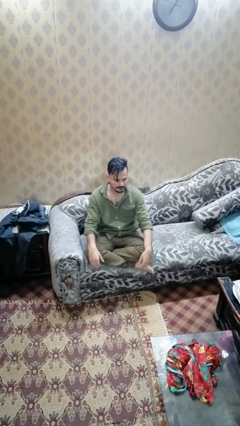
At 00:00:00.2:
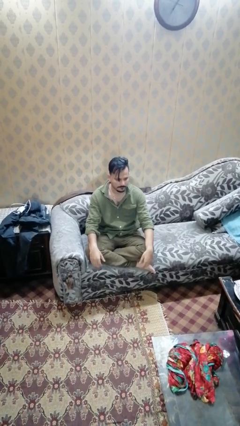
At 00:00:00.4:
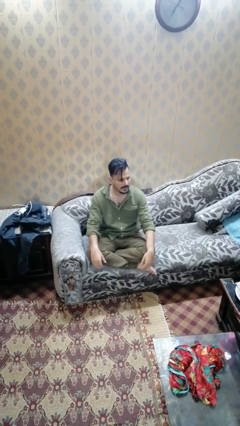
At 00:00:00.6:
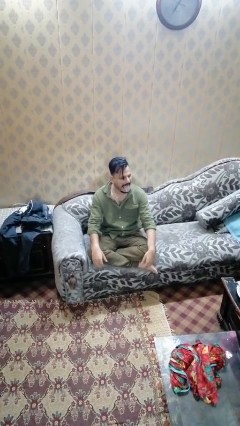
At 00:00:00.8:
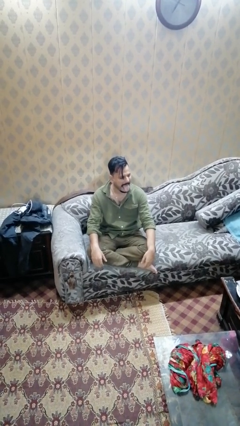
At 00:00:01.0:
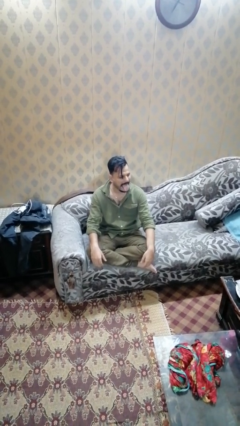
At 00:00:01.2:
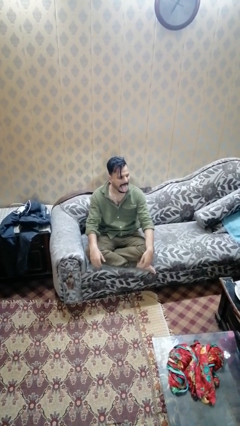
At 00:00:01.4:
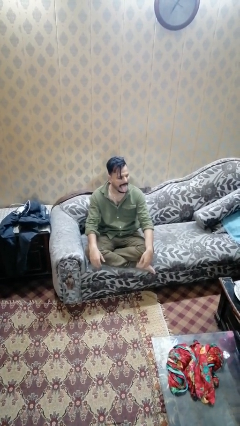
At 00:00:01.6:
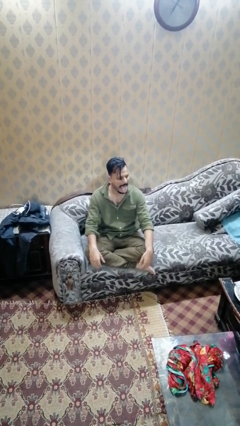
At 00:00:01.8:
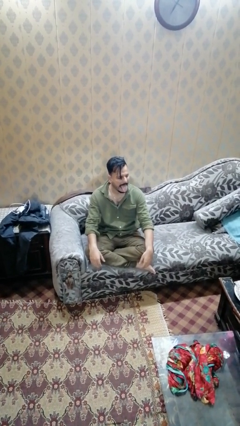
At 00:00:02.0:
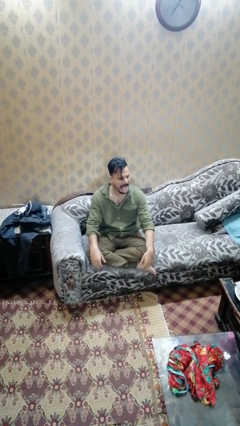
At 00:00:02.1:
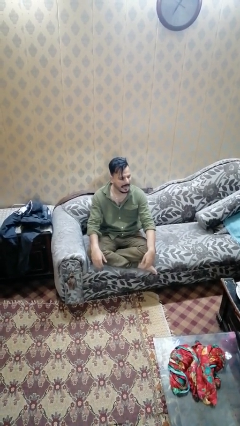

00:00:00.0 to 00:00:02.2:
person sticks out tongue

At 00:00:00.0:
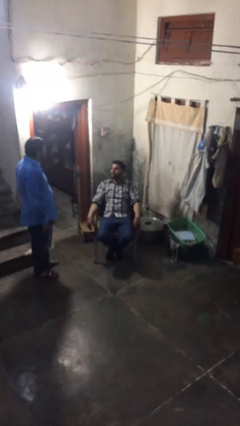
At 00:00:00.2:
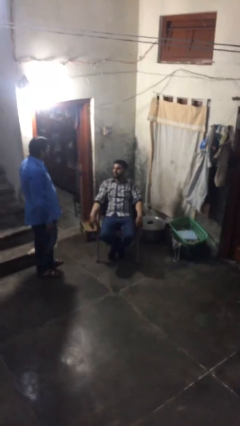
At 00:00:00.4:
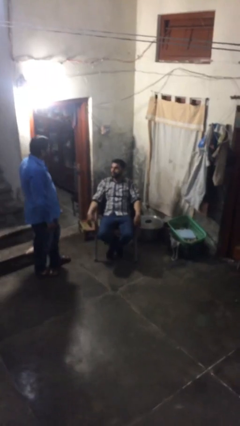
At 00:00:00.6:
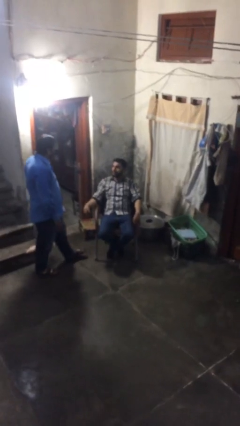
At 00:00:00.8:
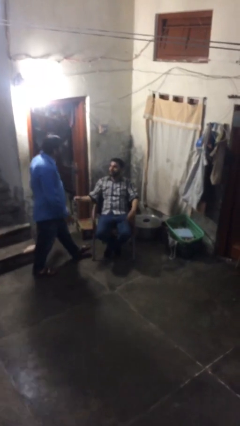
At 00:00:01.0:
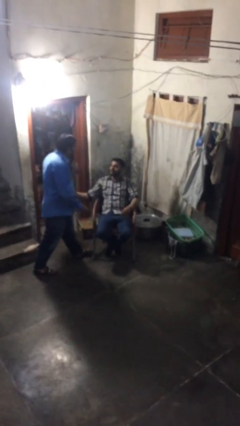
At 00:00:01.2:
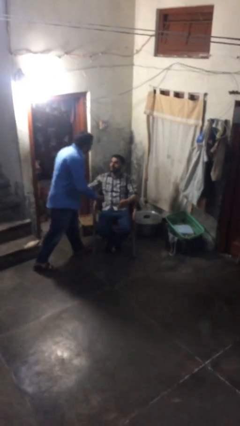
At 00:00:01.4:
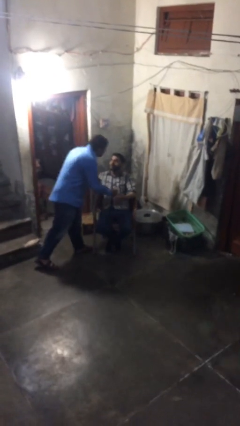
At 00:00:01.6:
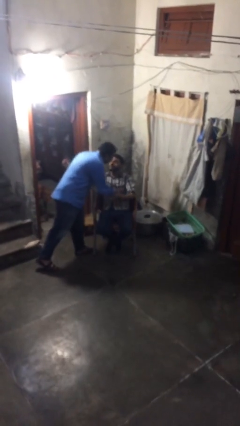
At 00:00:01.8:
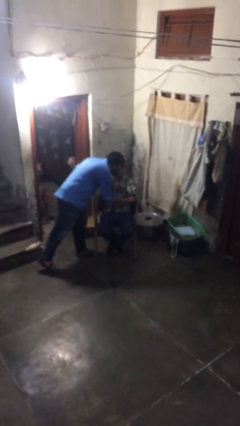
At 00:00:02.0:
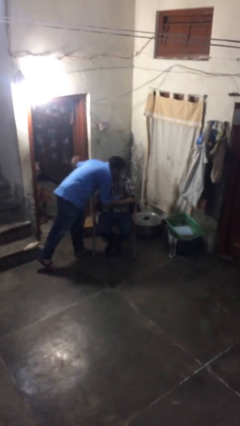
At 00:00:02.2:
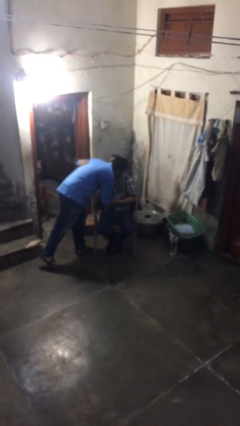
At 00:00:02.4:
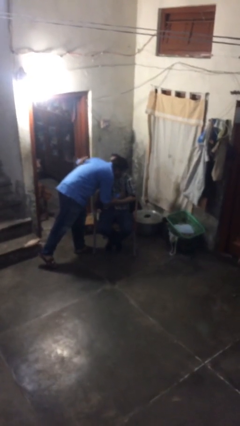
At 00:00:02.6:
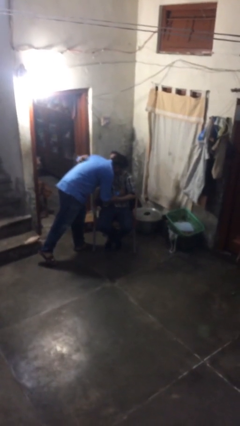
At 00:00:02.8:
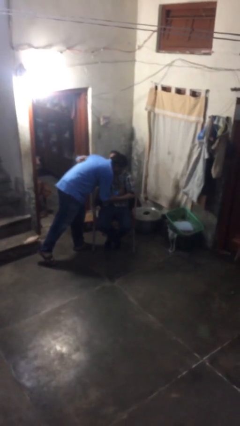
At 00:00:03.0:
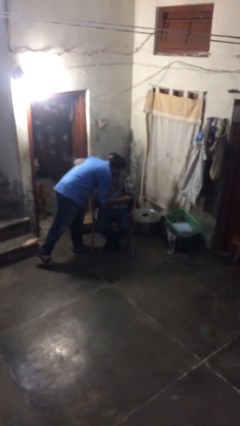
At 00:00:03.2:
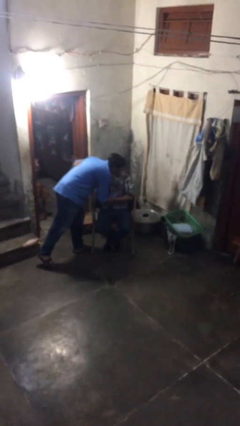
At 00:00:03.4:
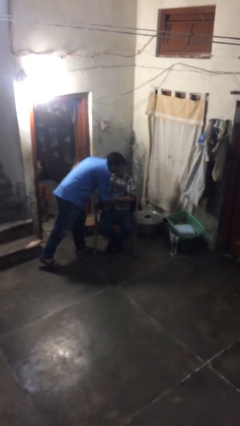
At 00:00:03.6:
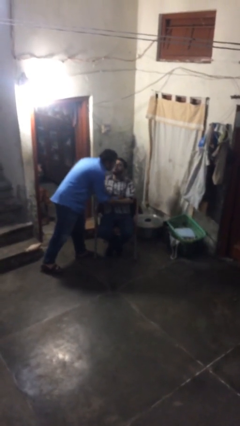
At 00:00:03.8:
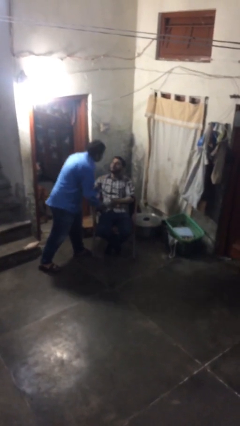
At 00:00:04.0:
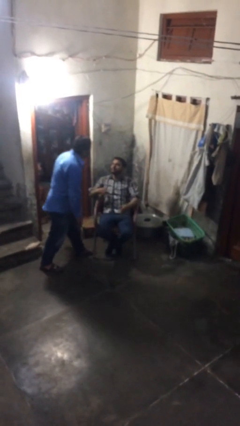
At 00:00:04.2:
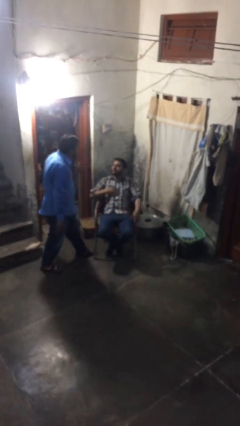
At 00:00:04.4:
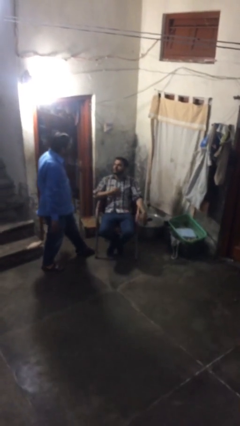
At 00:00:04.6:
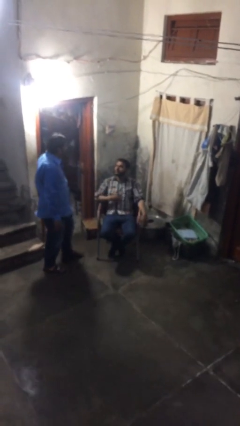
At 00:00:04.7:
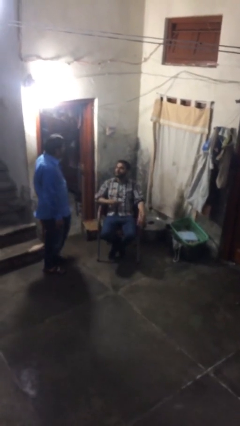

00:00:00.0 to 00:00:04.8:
person embraces person

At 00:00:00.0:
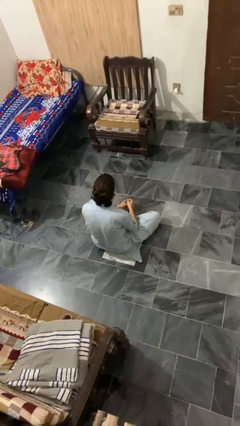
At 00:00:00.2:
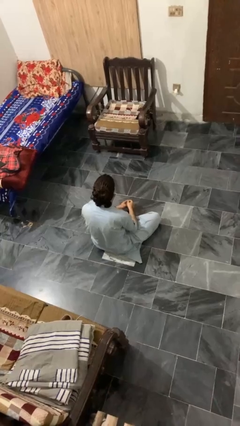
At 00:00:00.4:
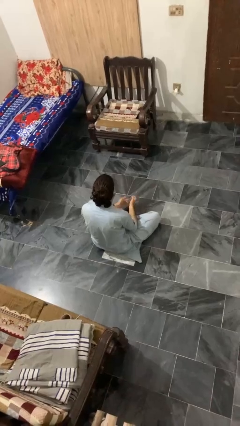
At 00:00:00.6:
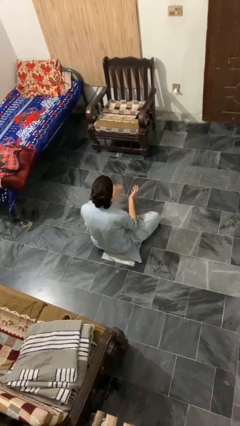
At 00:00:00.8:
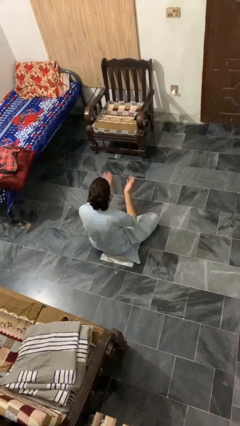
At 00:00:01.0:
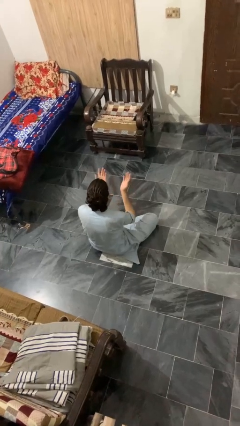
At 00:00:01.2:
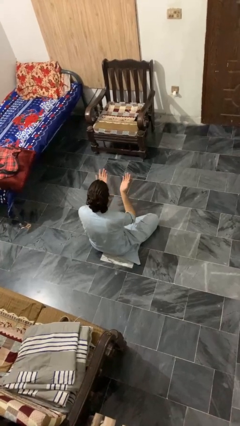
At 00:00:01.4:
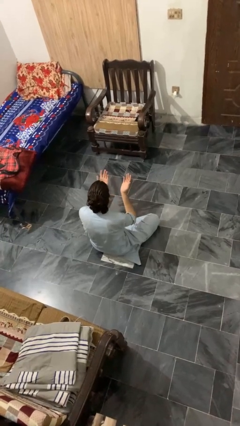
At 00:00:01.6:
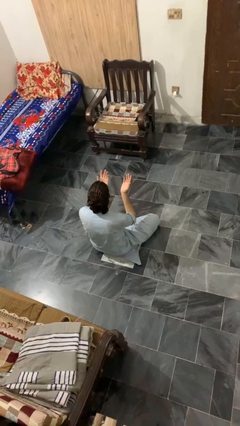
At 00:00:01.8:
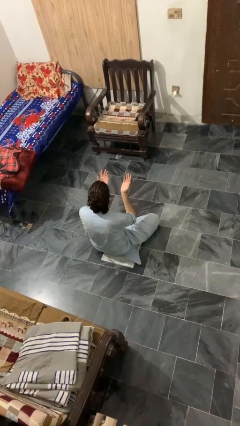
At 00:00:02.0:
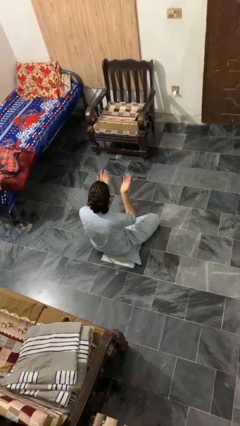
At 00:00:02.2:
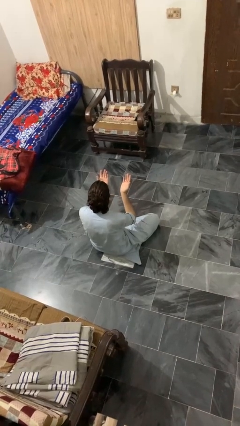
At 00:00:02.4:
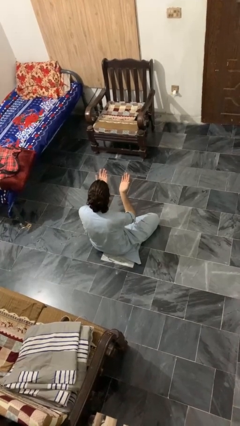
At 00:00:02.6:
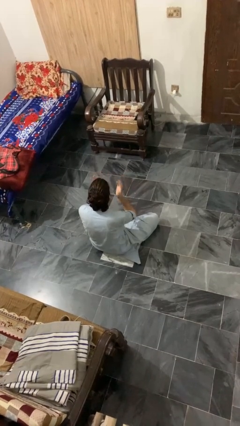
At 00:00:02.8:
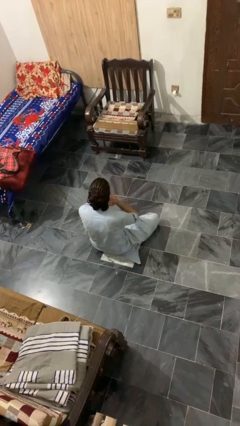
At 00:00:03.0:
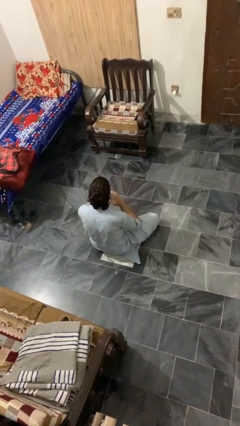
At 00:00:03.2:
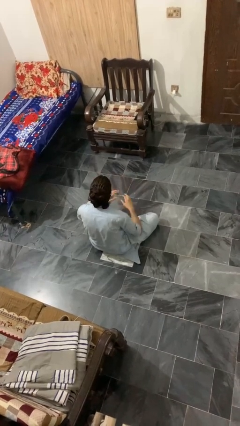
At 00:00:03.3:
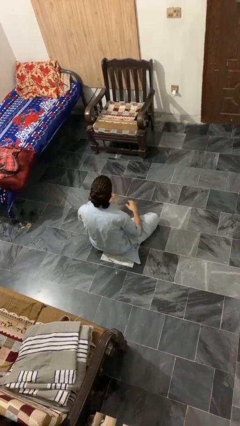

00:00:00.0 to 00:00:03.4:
person prays

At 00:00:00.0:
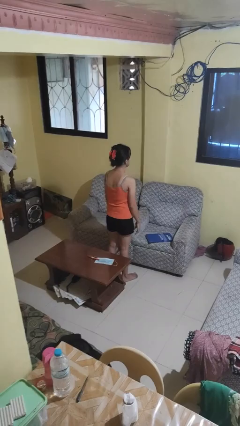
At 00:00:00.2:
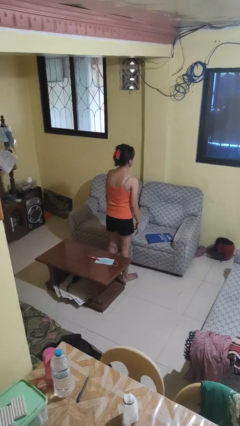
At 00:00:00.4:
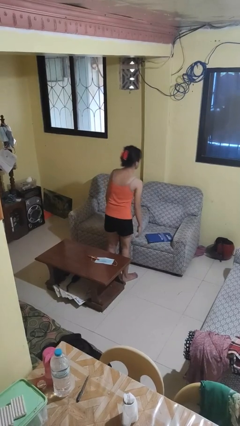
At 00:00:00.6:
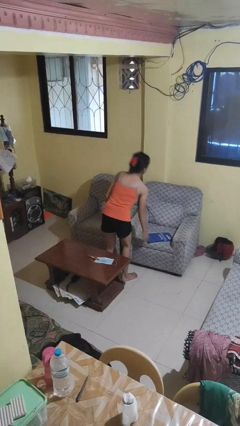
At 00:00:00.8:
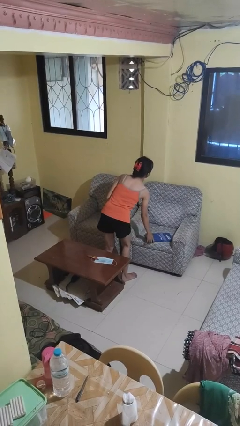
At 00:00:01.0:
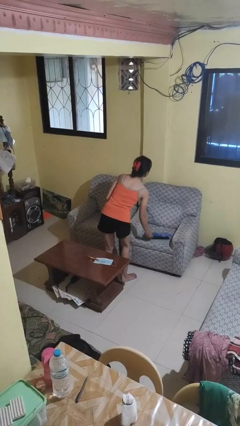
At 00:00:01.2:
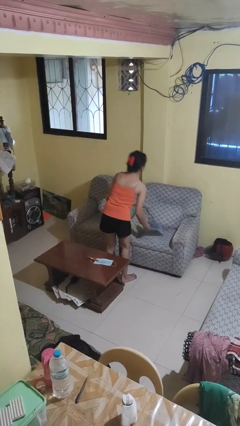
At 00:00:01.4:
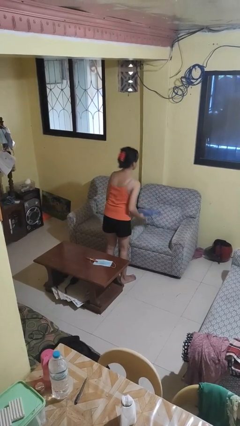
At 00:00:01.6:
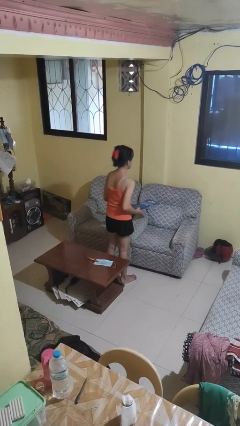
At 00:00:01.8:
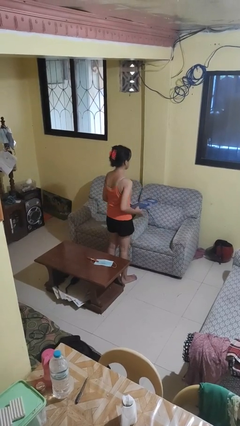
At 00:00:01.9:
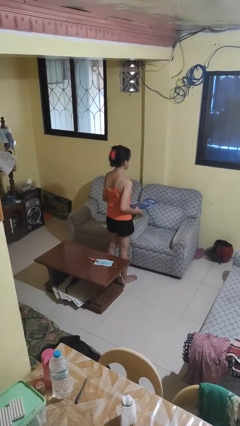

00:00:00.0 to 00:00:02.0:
person picks up object from couch

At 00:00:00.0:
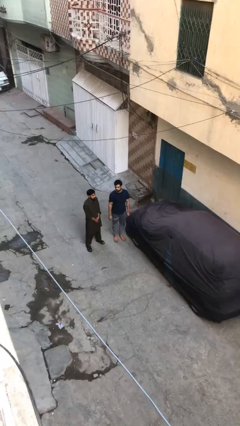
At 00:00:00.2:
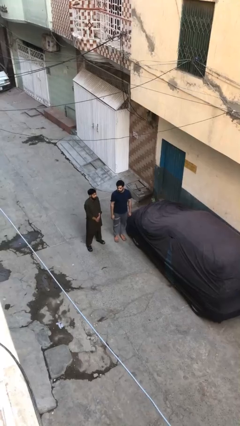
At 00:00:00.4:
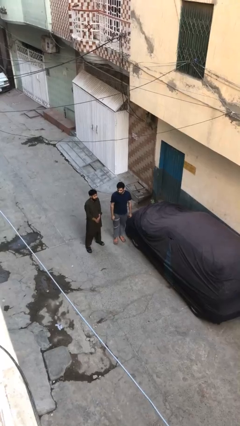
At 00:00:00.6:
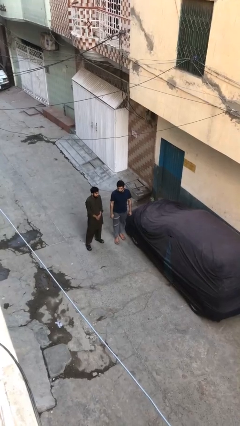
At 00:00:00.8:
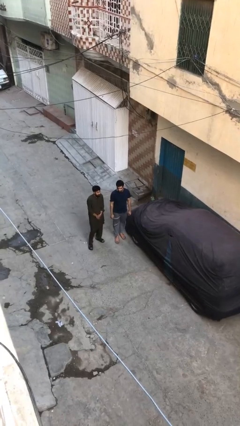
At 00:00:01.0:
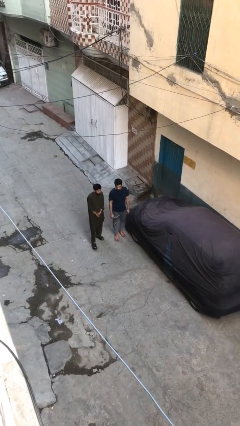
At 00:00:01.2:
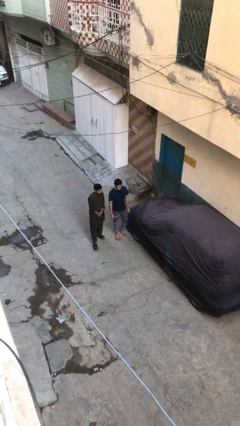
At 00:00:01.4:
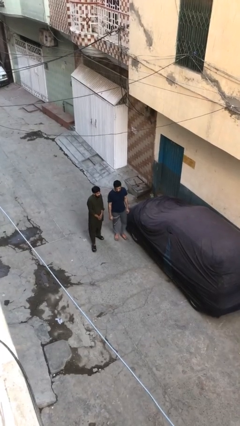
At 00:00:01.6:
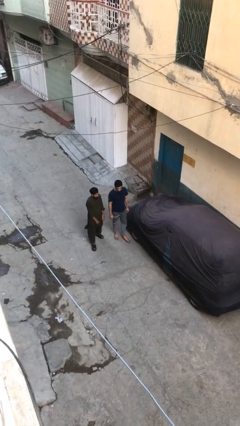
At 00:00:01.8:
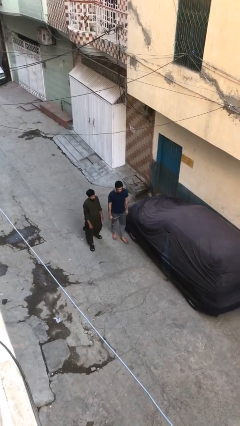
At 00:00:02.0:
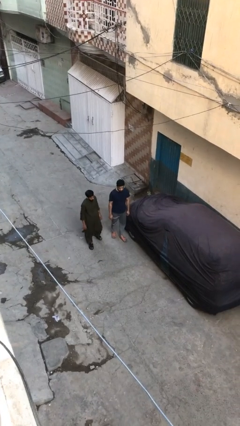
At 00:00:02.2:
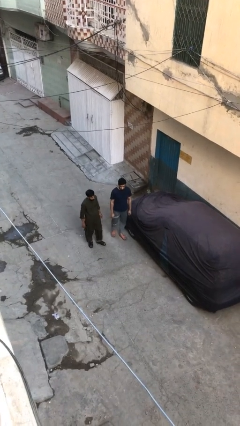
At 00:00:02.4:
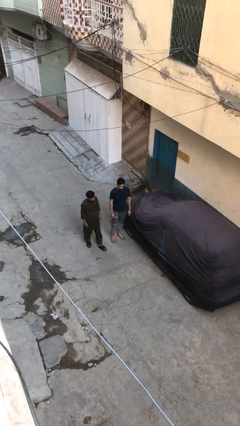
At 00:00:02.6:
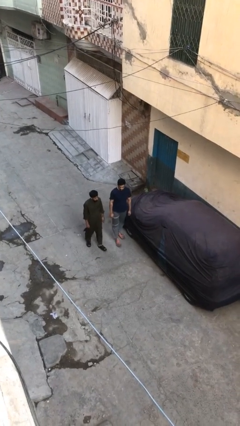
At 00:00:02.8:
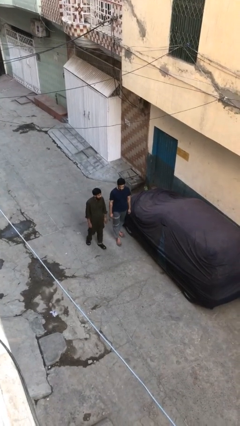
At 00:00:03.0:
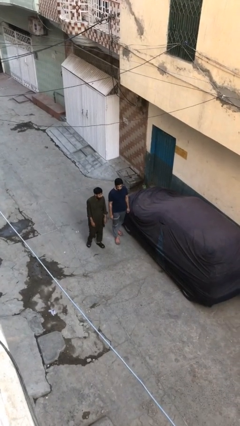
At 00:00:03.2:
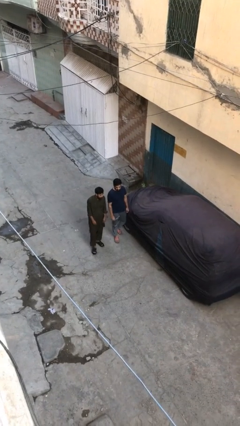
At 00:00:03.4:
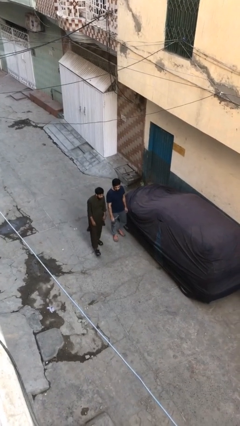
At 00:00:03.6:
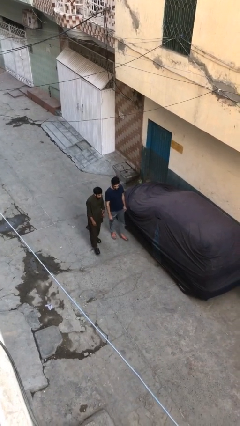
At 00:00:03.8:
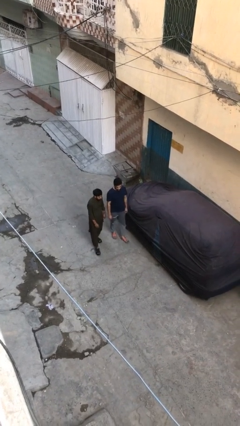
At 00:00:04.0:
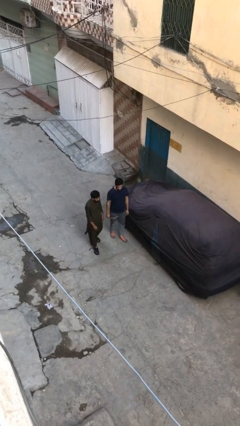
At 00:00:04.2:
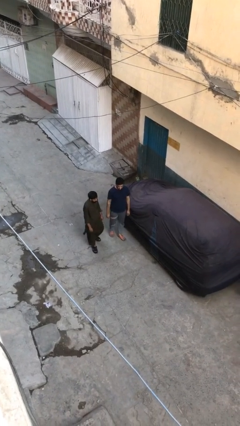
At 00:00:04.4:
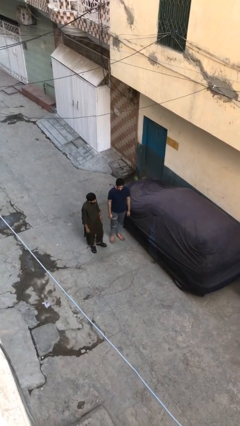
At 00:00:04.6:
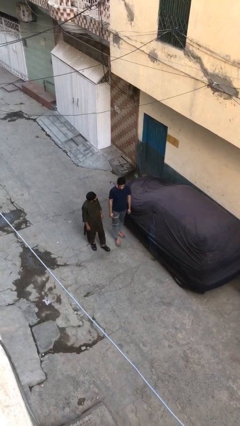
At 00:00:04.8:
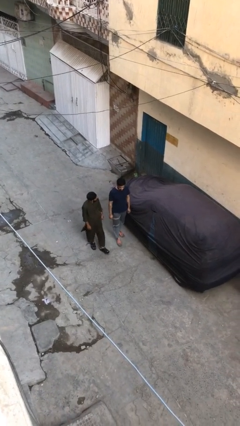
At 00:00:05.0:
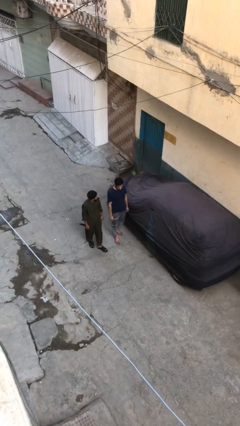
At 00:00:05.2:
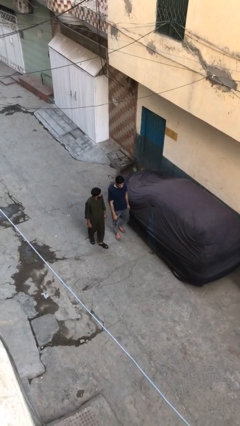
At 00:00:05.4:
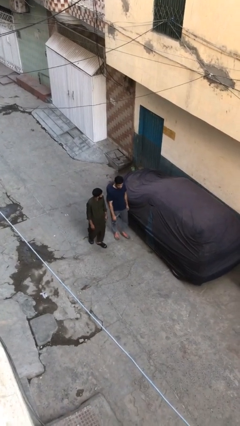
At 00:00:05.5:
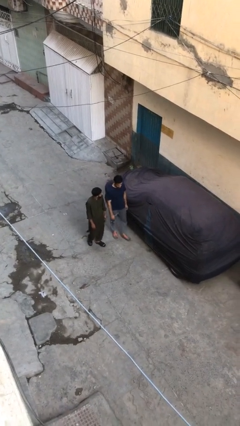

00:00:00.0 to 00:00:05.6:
person talks to person
